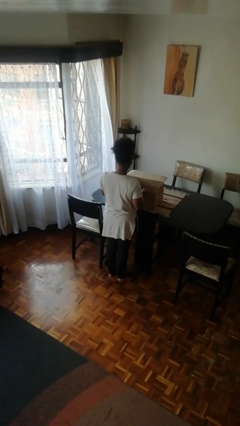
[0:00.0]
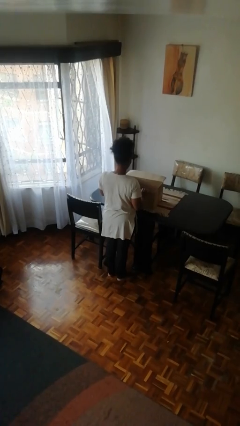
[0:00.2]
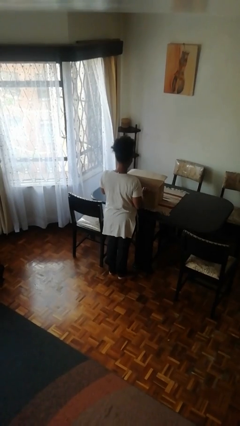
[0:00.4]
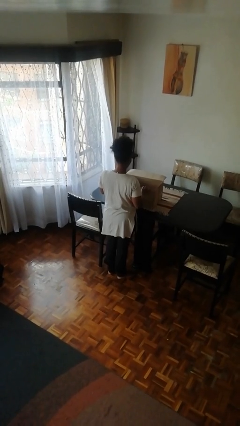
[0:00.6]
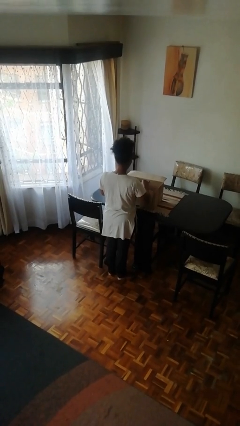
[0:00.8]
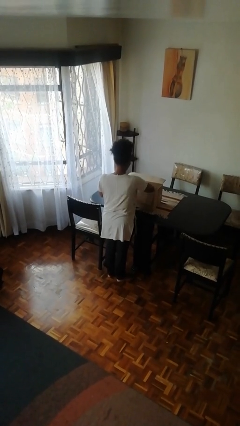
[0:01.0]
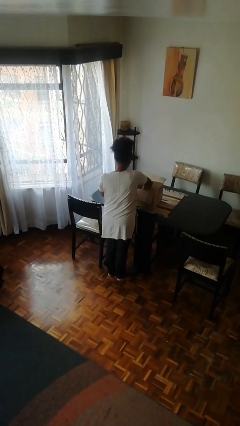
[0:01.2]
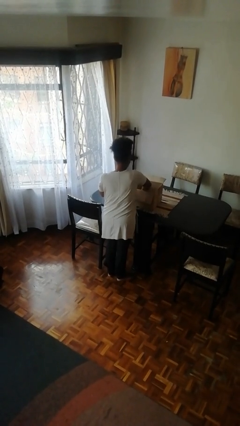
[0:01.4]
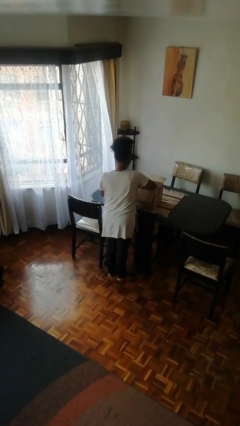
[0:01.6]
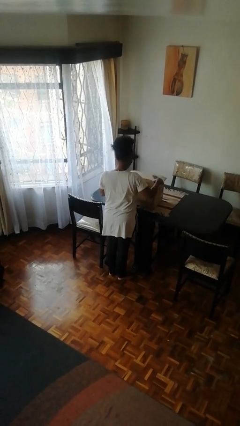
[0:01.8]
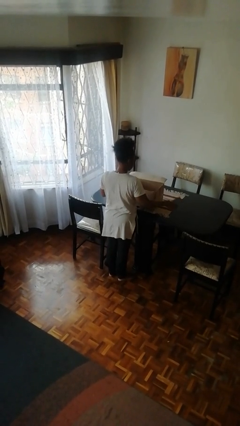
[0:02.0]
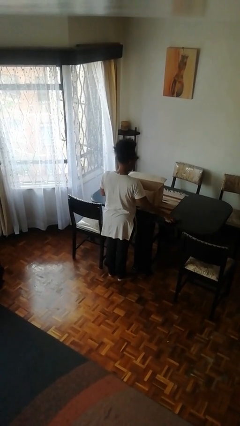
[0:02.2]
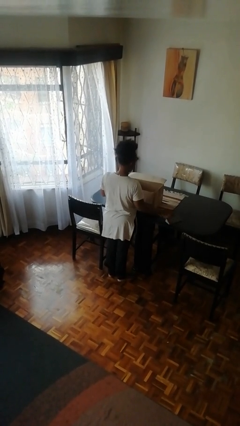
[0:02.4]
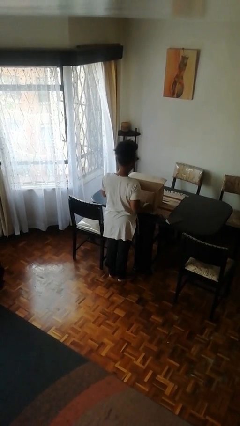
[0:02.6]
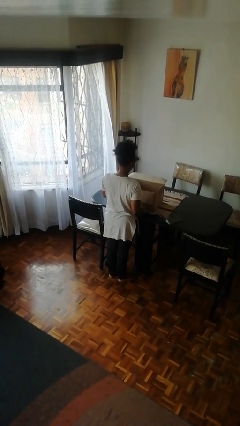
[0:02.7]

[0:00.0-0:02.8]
person takes object from box

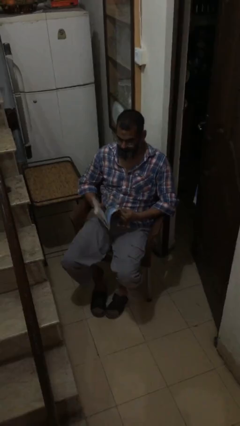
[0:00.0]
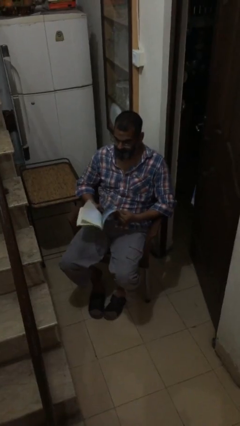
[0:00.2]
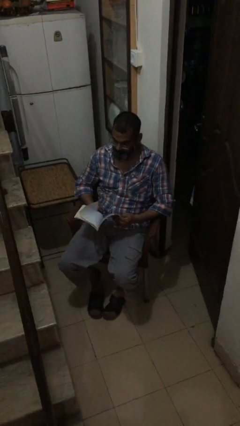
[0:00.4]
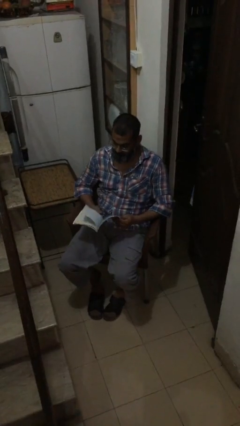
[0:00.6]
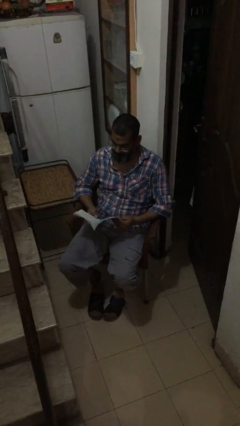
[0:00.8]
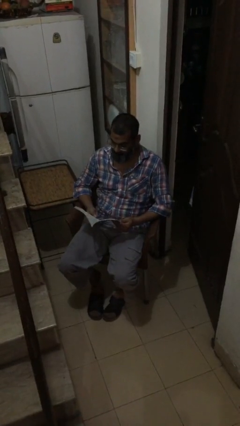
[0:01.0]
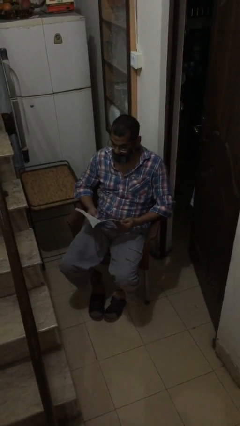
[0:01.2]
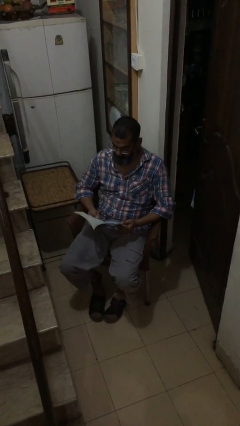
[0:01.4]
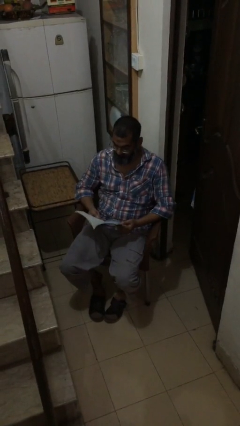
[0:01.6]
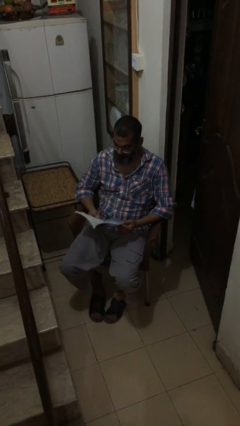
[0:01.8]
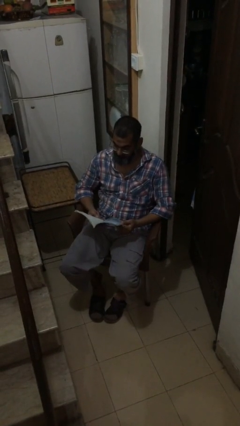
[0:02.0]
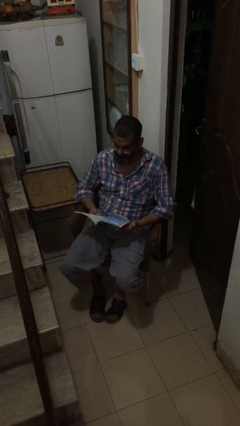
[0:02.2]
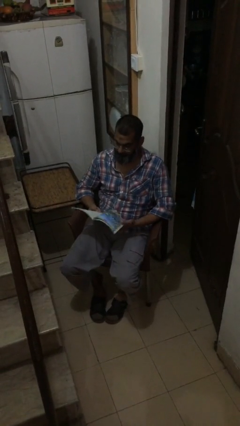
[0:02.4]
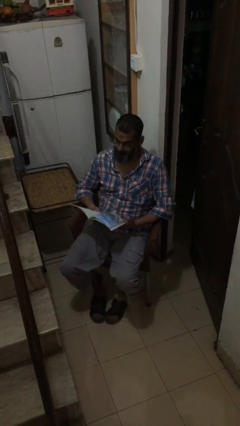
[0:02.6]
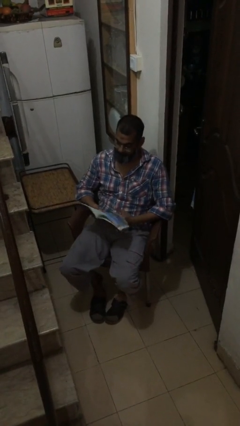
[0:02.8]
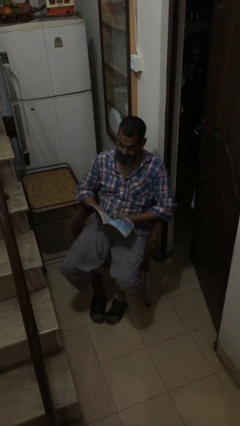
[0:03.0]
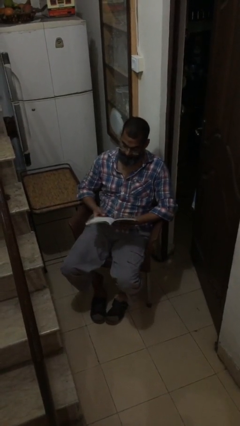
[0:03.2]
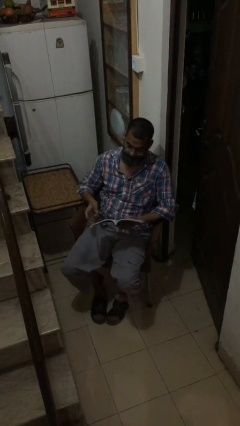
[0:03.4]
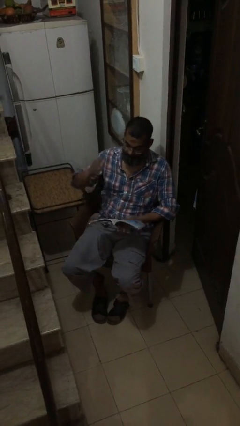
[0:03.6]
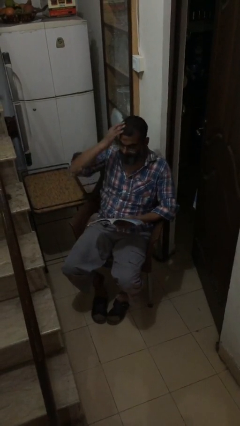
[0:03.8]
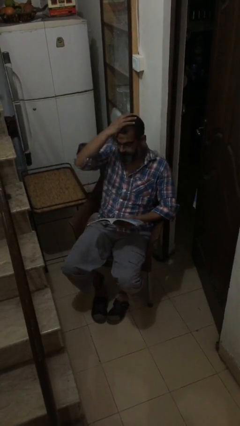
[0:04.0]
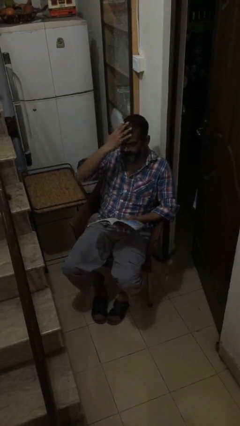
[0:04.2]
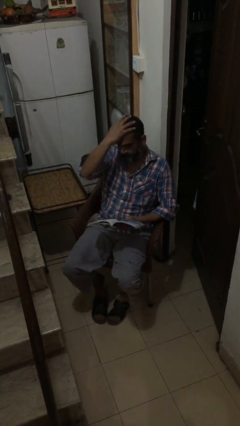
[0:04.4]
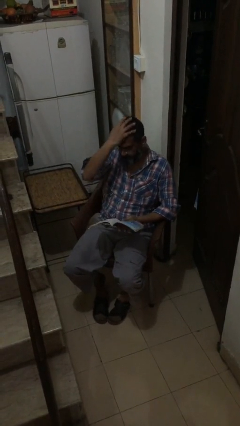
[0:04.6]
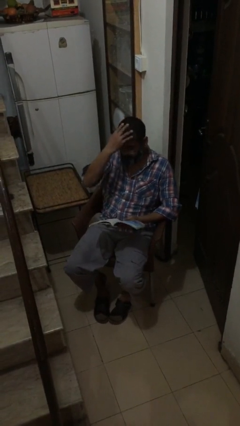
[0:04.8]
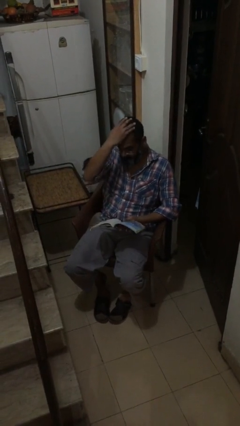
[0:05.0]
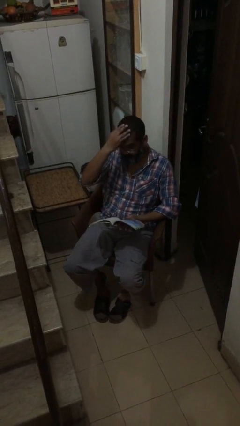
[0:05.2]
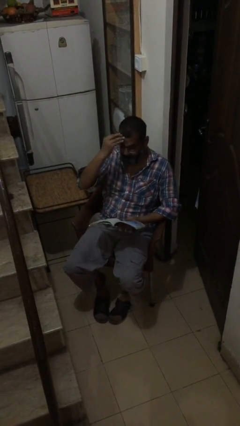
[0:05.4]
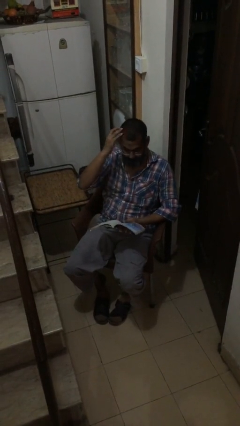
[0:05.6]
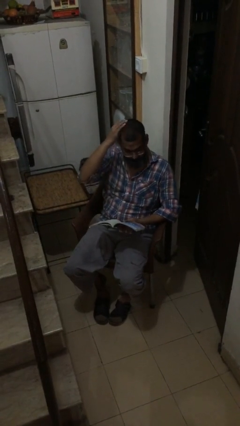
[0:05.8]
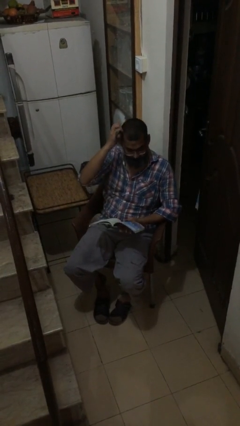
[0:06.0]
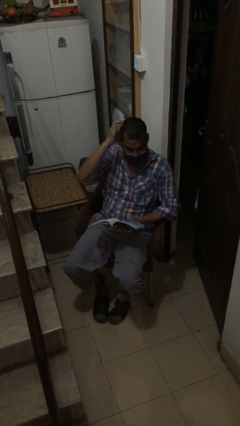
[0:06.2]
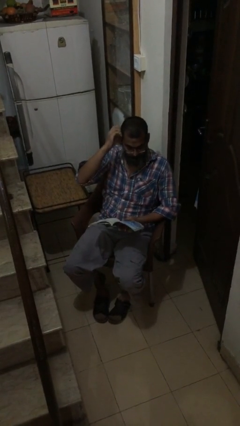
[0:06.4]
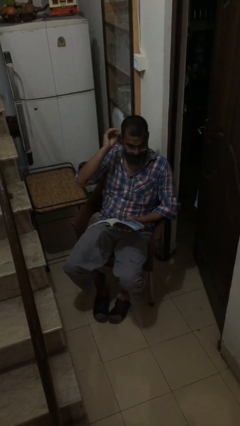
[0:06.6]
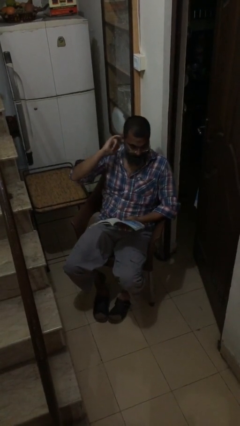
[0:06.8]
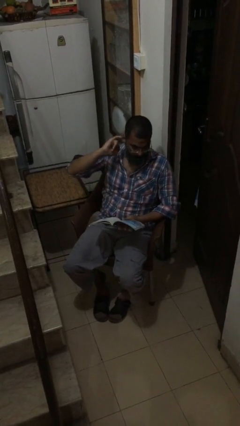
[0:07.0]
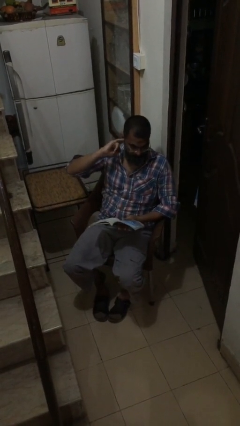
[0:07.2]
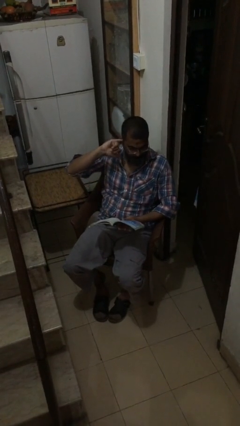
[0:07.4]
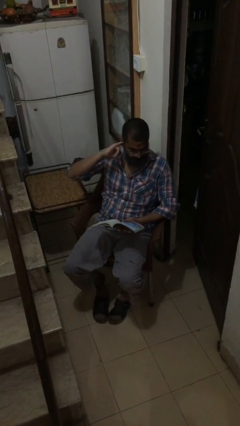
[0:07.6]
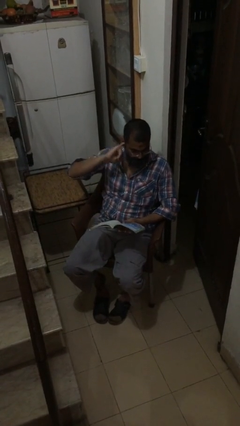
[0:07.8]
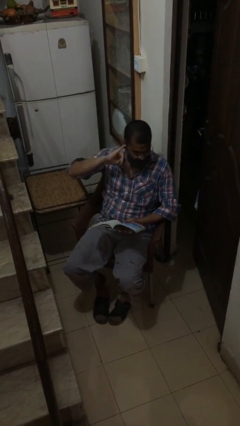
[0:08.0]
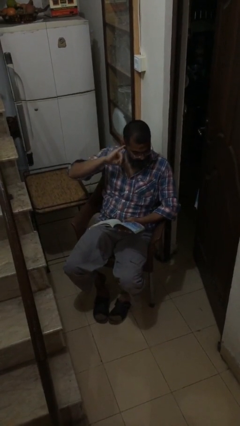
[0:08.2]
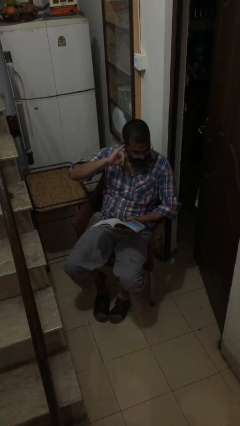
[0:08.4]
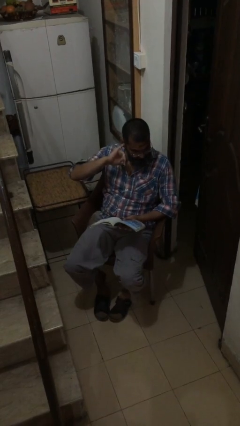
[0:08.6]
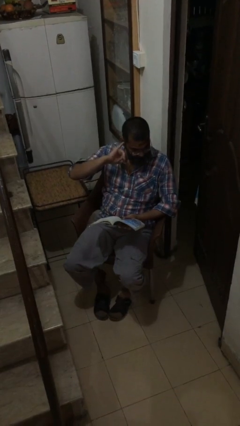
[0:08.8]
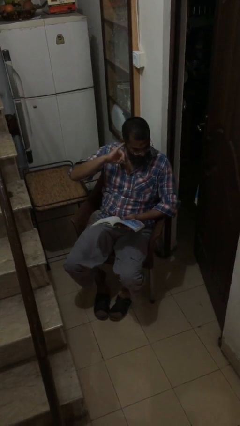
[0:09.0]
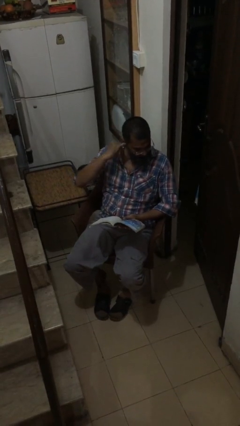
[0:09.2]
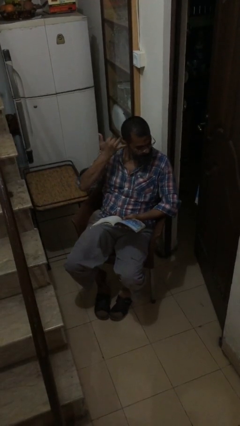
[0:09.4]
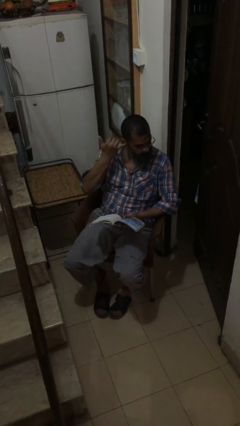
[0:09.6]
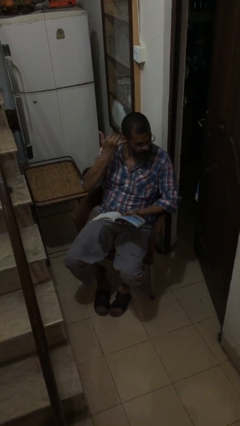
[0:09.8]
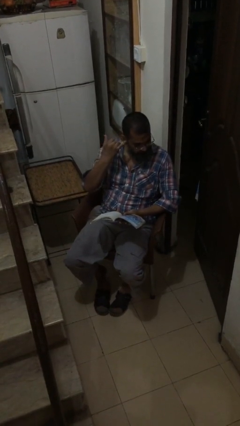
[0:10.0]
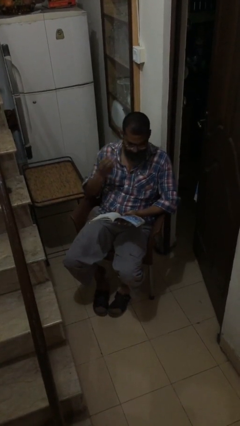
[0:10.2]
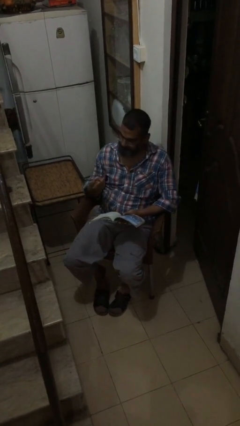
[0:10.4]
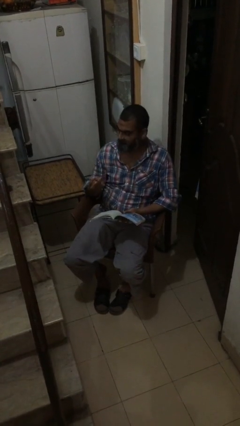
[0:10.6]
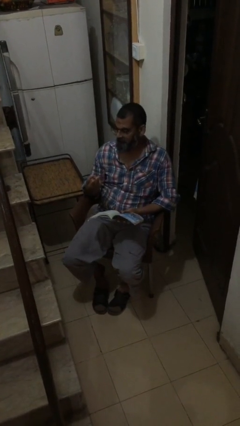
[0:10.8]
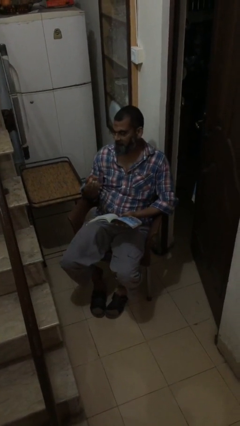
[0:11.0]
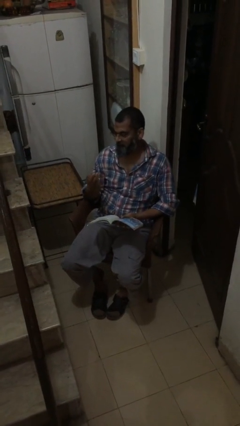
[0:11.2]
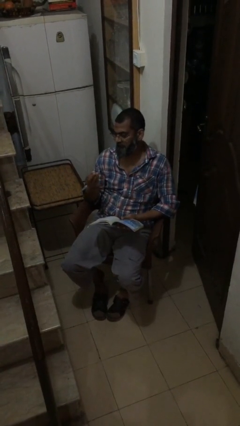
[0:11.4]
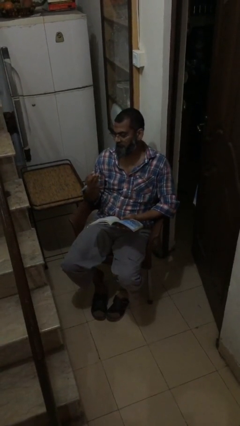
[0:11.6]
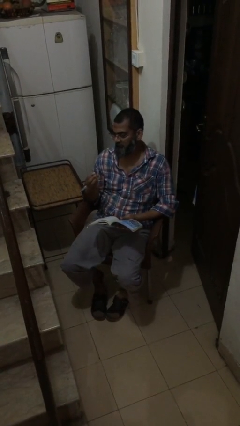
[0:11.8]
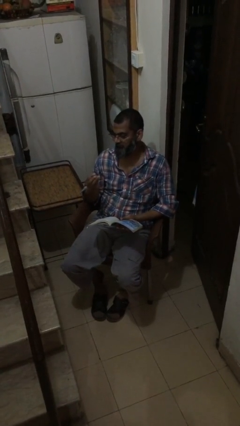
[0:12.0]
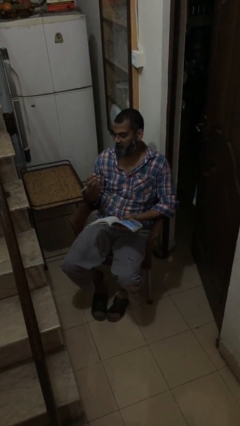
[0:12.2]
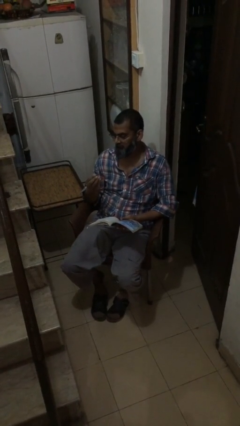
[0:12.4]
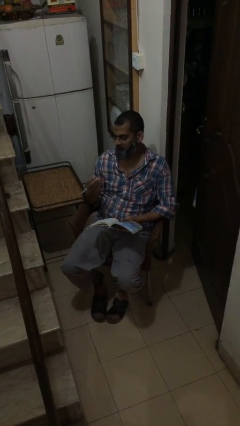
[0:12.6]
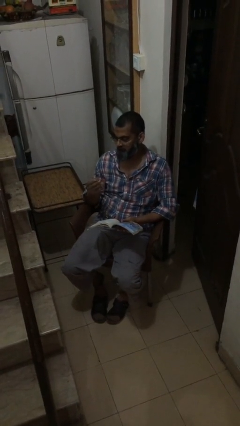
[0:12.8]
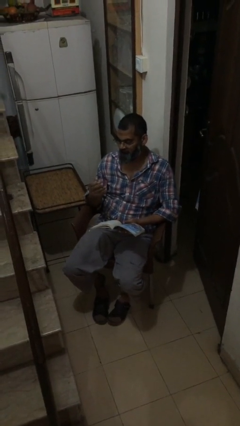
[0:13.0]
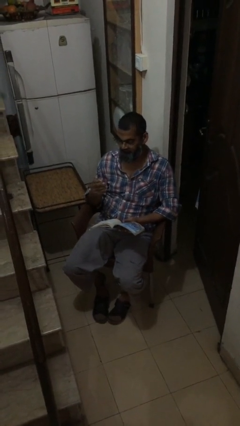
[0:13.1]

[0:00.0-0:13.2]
person reads document

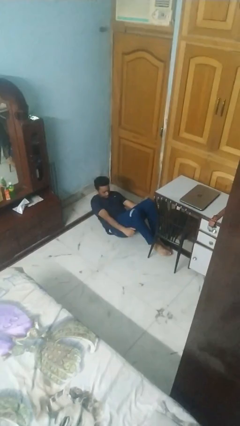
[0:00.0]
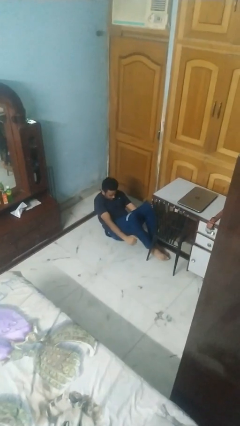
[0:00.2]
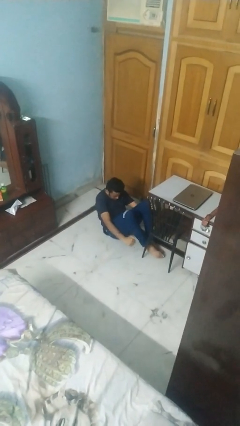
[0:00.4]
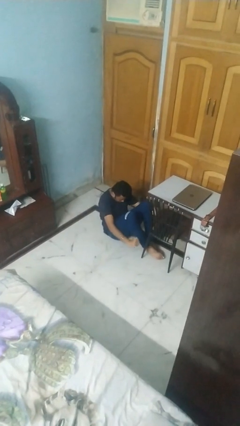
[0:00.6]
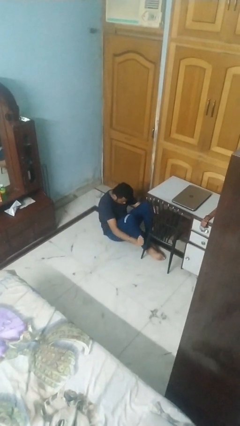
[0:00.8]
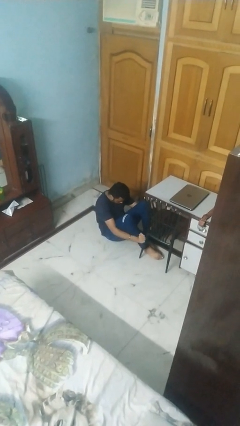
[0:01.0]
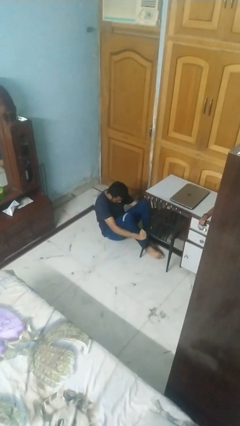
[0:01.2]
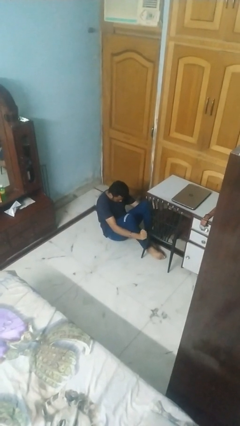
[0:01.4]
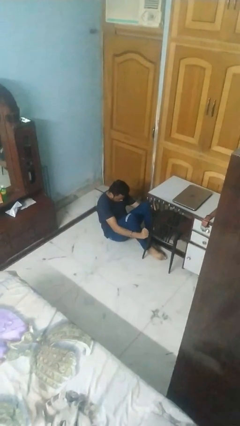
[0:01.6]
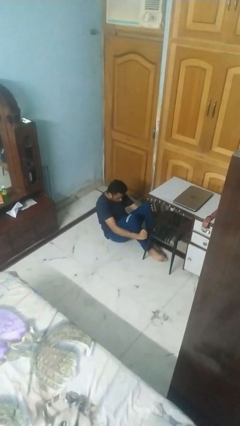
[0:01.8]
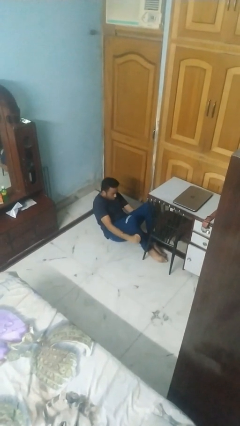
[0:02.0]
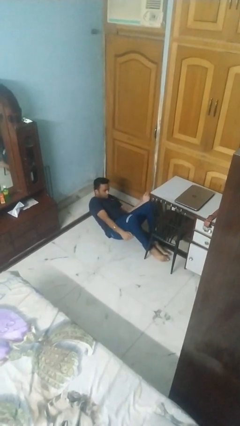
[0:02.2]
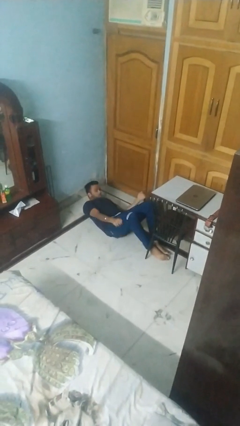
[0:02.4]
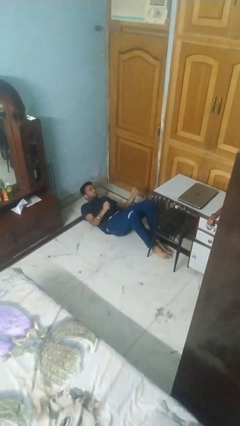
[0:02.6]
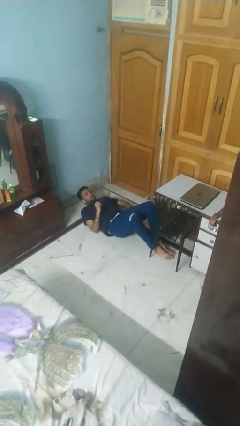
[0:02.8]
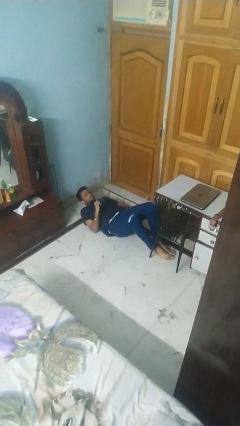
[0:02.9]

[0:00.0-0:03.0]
person exercises with situp
